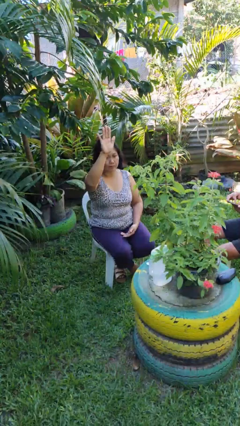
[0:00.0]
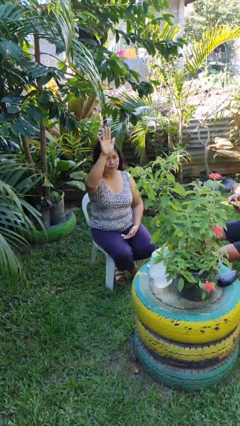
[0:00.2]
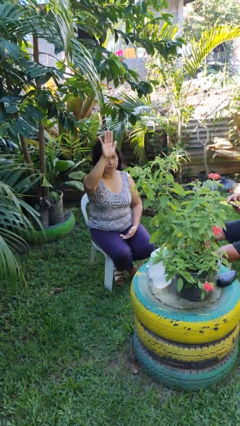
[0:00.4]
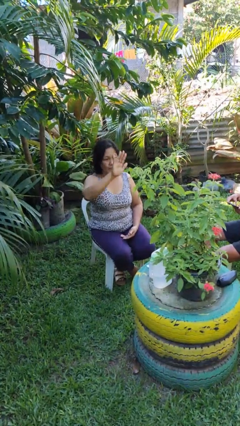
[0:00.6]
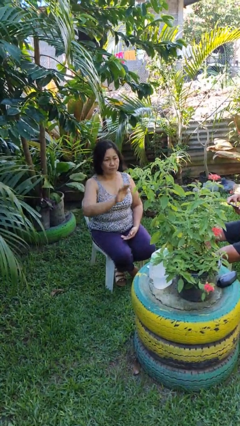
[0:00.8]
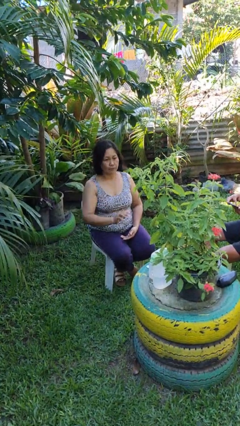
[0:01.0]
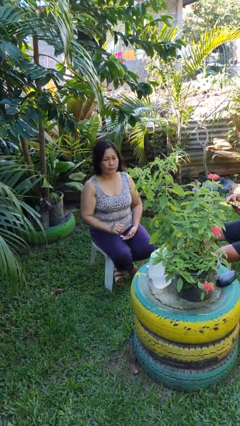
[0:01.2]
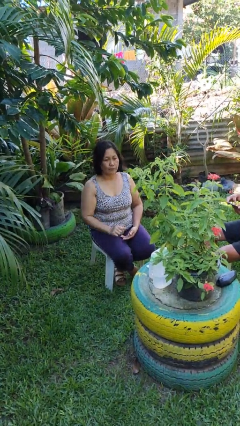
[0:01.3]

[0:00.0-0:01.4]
person gestures swipe down

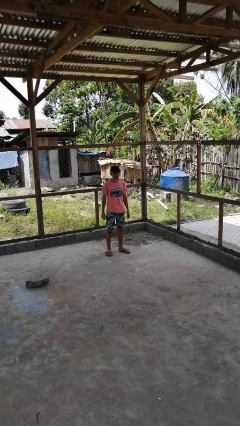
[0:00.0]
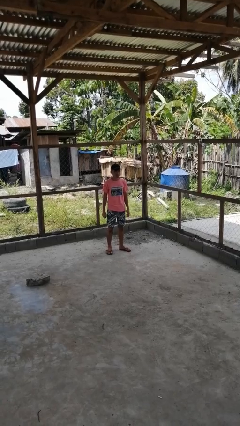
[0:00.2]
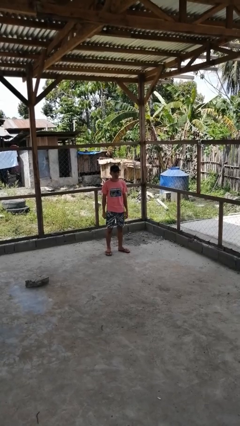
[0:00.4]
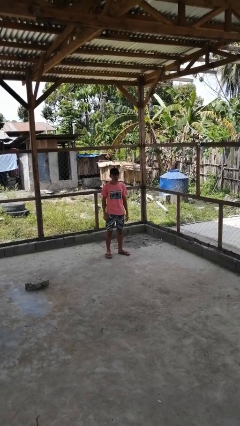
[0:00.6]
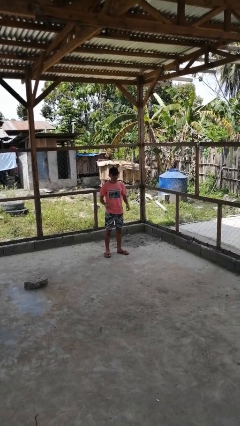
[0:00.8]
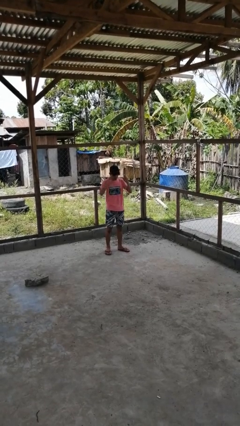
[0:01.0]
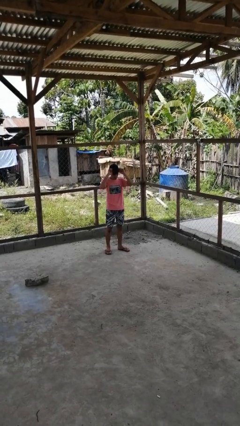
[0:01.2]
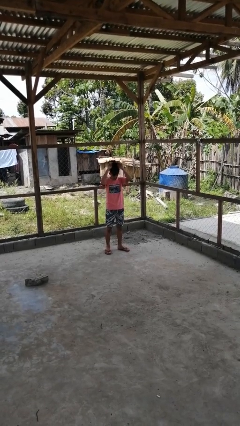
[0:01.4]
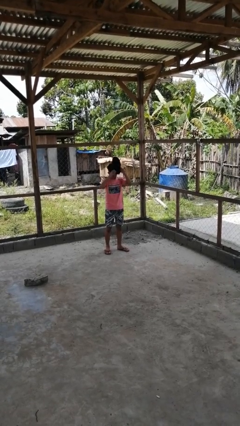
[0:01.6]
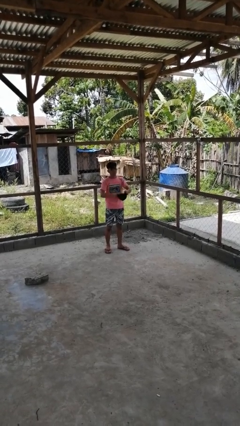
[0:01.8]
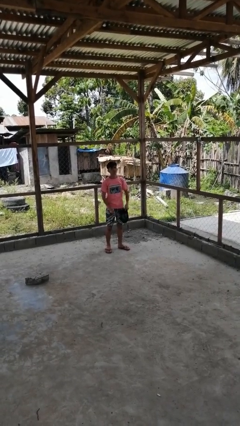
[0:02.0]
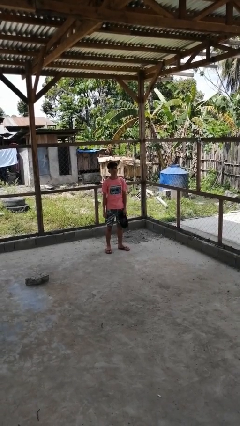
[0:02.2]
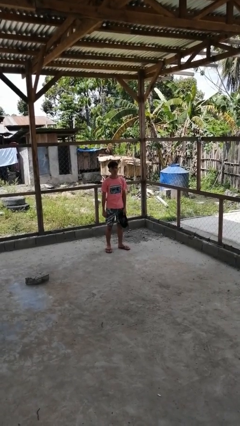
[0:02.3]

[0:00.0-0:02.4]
person takes off hat

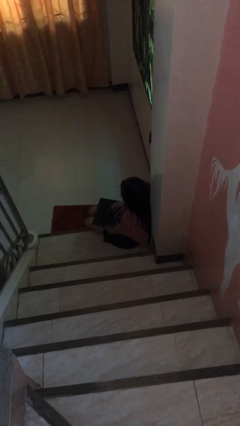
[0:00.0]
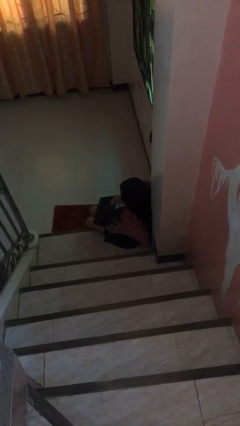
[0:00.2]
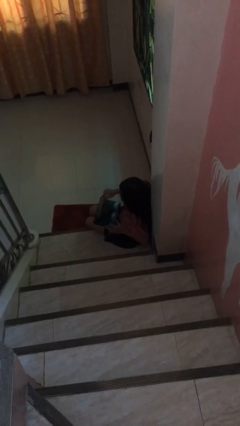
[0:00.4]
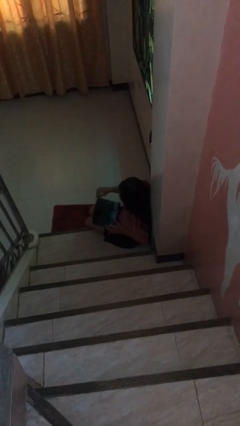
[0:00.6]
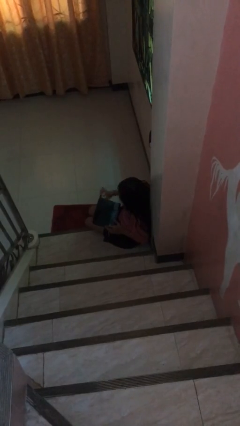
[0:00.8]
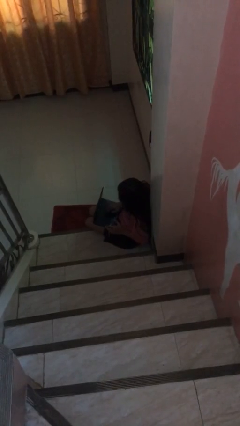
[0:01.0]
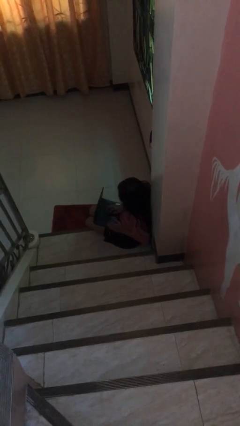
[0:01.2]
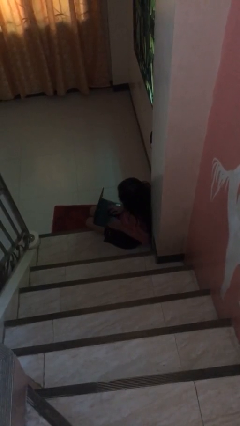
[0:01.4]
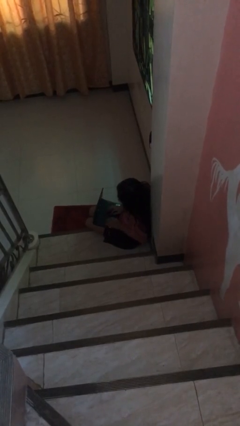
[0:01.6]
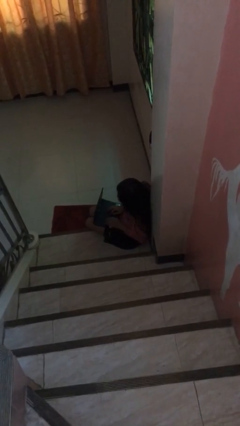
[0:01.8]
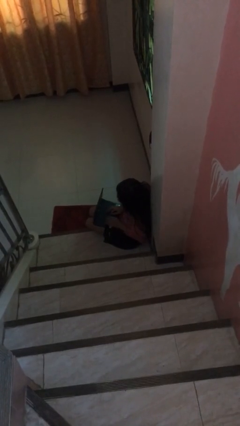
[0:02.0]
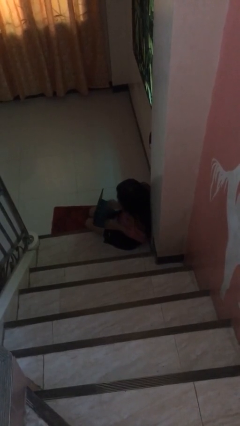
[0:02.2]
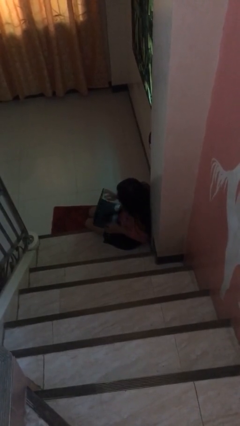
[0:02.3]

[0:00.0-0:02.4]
person interacts with laptop

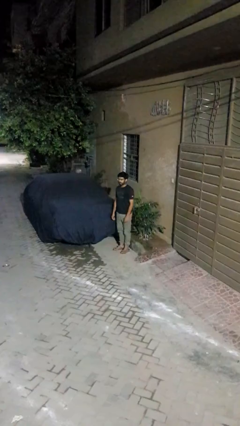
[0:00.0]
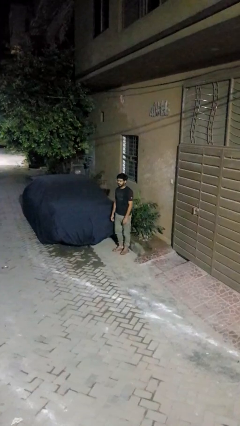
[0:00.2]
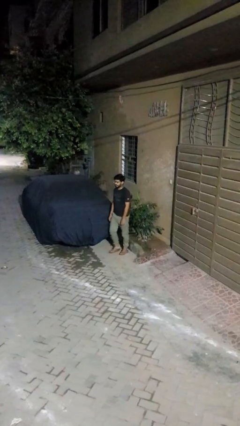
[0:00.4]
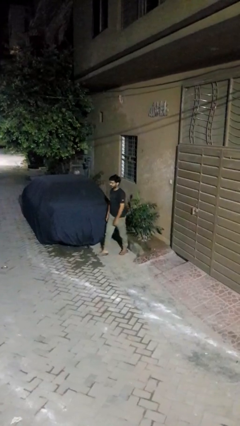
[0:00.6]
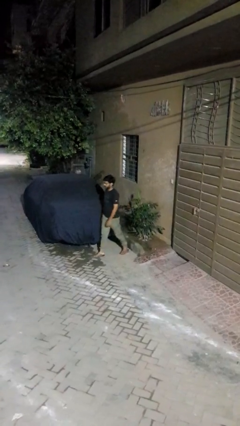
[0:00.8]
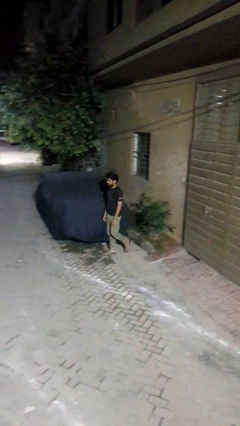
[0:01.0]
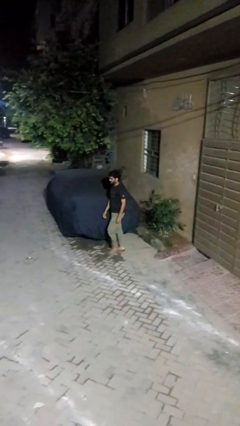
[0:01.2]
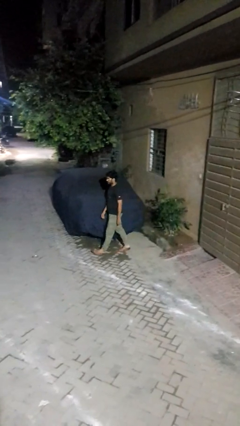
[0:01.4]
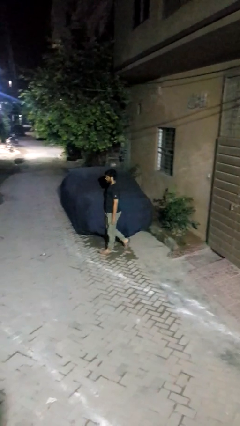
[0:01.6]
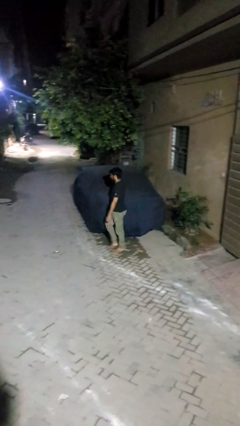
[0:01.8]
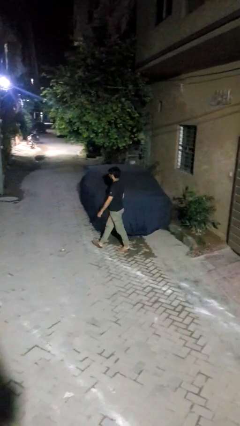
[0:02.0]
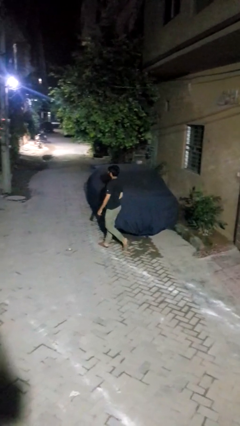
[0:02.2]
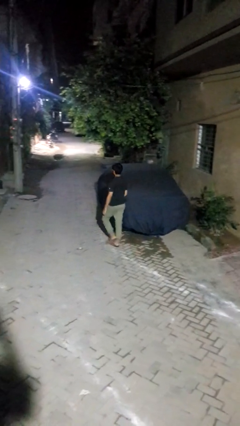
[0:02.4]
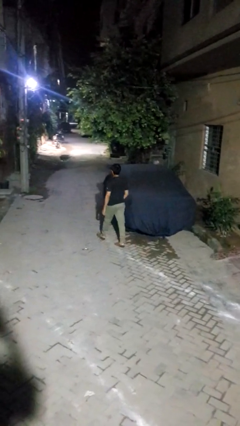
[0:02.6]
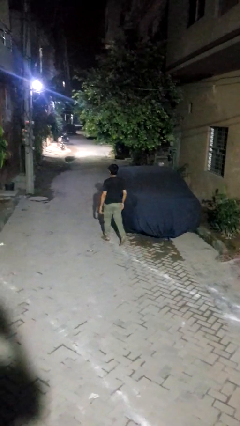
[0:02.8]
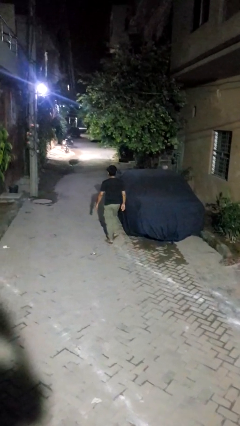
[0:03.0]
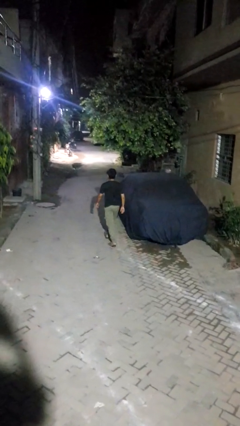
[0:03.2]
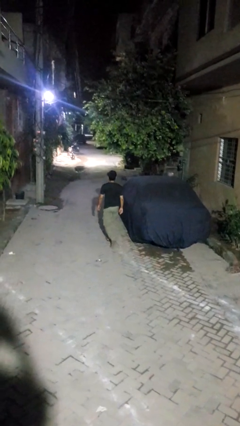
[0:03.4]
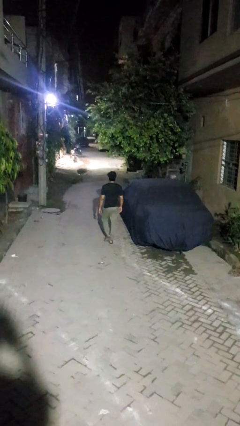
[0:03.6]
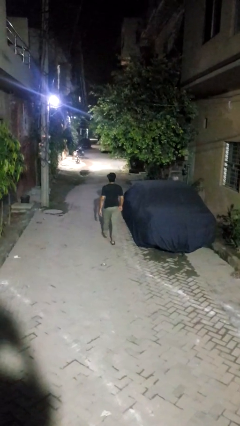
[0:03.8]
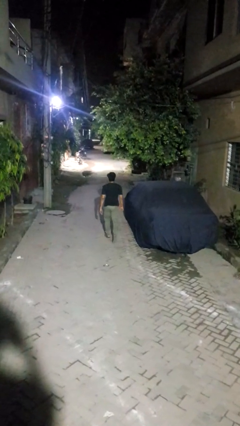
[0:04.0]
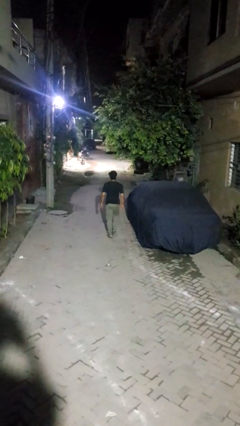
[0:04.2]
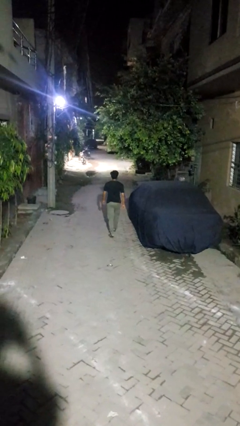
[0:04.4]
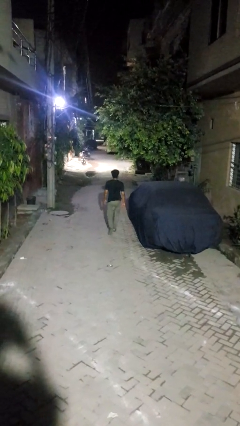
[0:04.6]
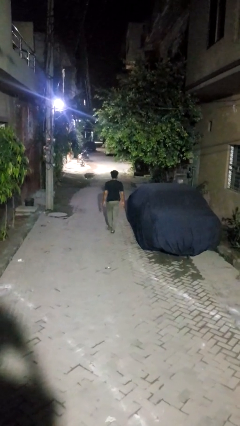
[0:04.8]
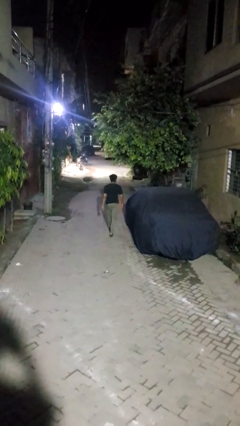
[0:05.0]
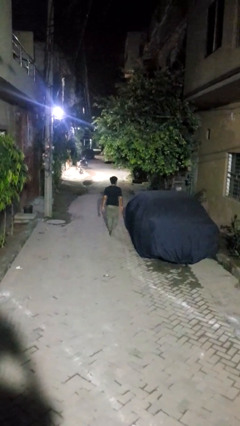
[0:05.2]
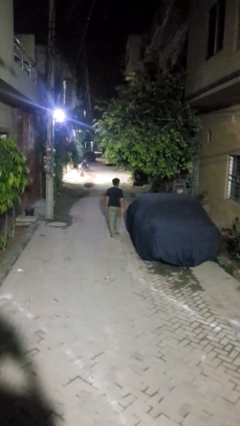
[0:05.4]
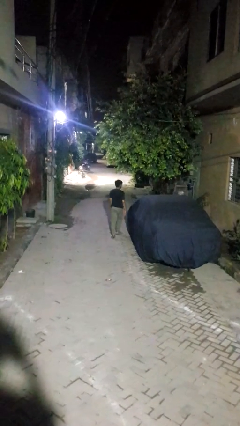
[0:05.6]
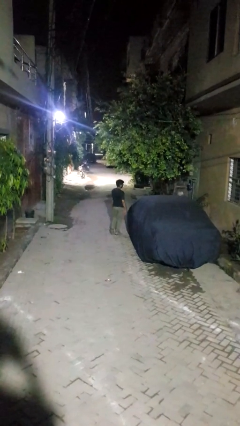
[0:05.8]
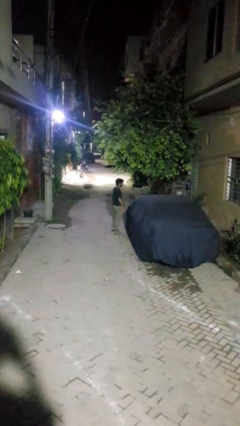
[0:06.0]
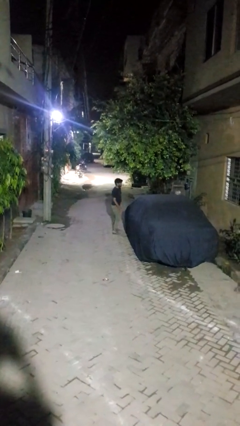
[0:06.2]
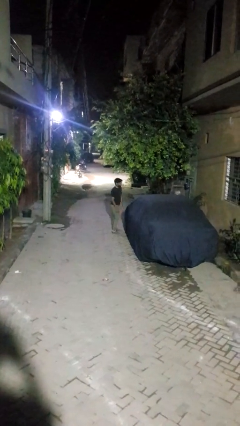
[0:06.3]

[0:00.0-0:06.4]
person walks around car

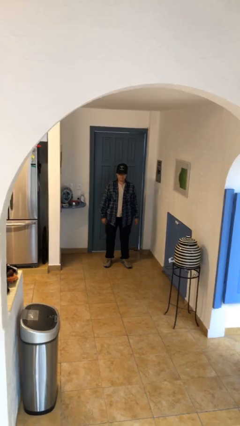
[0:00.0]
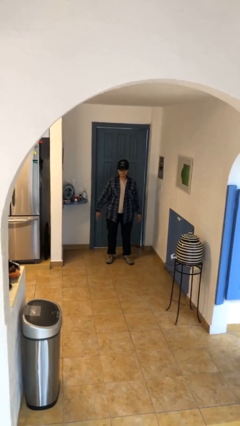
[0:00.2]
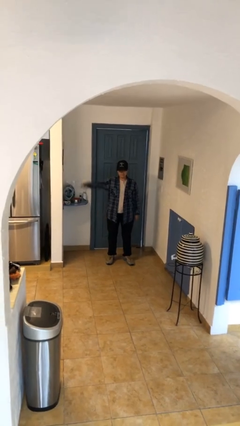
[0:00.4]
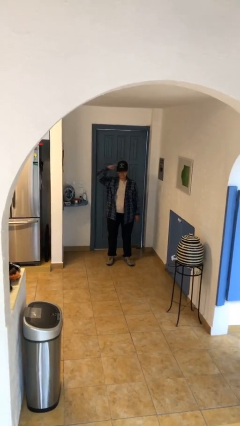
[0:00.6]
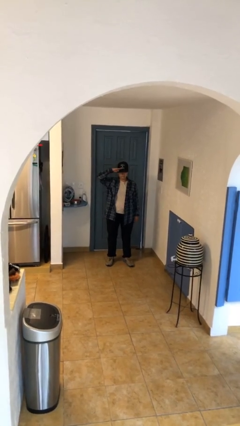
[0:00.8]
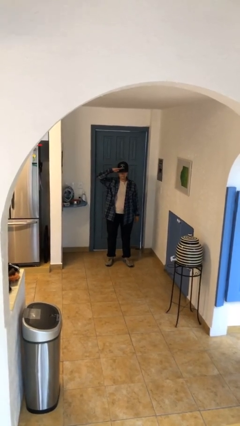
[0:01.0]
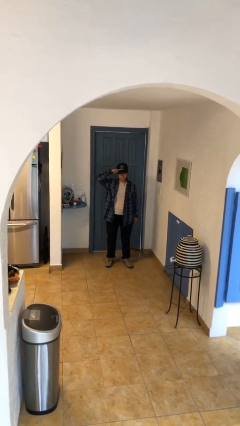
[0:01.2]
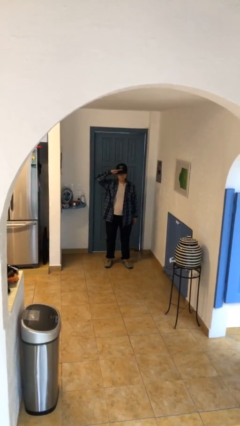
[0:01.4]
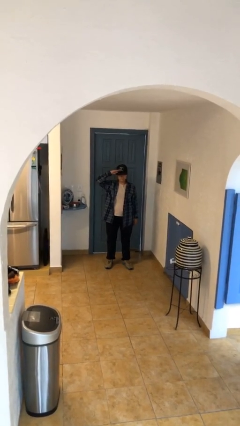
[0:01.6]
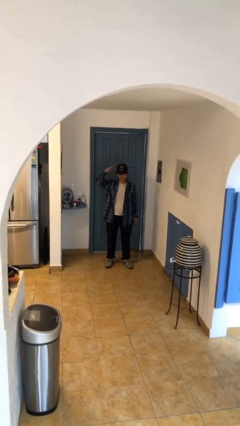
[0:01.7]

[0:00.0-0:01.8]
person salutes

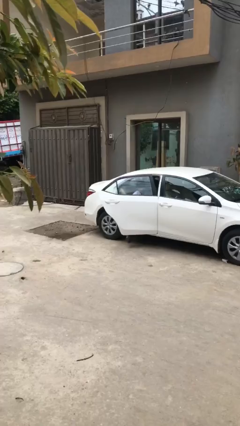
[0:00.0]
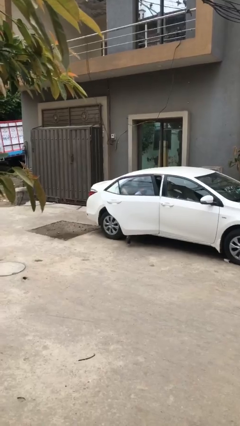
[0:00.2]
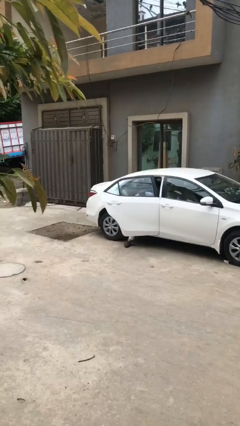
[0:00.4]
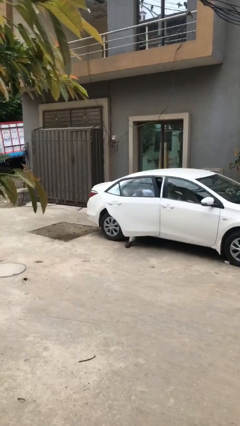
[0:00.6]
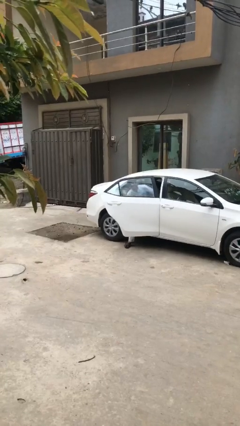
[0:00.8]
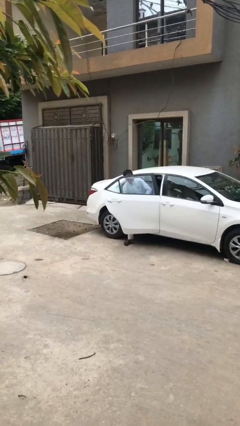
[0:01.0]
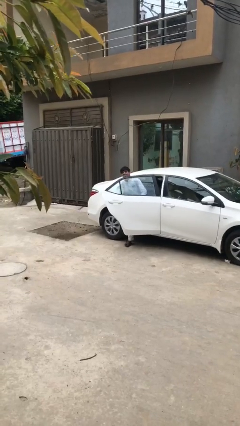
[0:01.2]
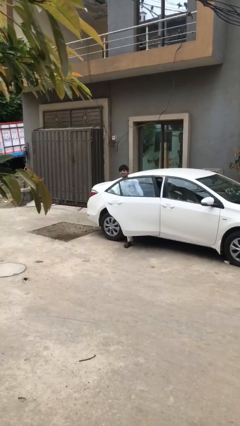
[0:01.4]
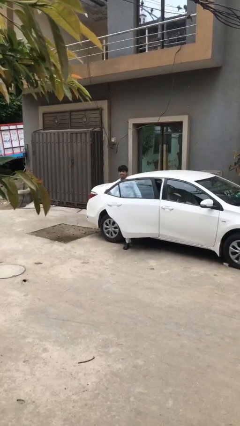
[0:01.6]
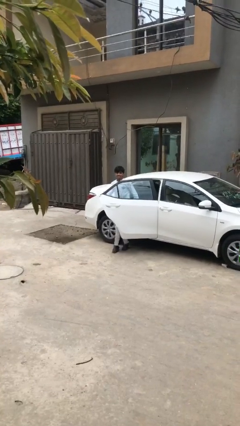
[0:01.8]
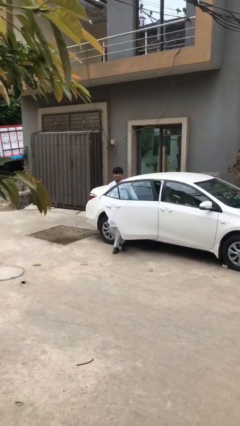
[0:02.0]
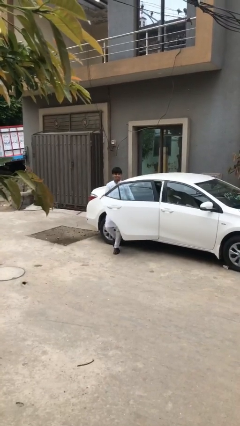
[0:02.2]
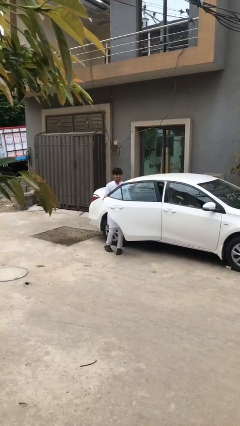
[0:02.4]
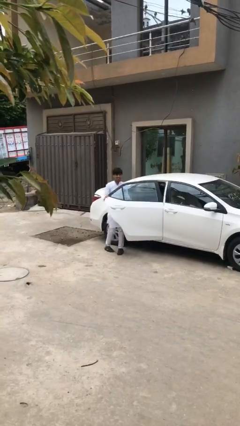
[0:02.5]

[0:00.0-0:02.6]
person exits car

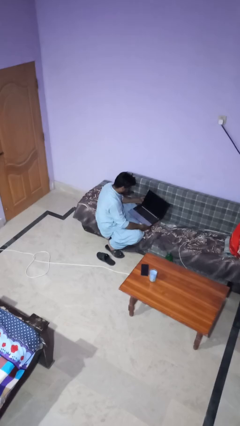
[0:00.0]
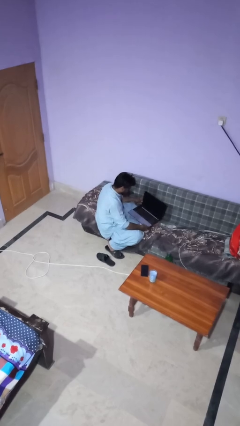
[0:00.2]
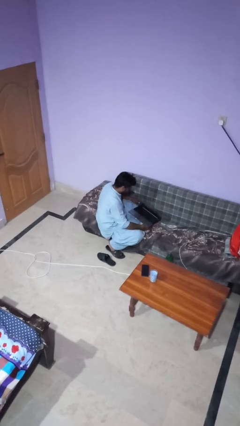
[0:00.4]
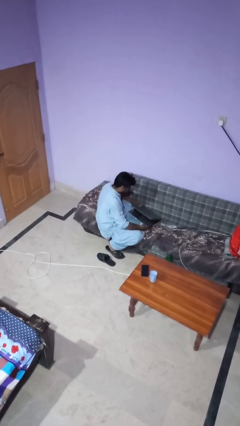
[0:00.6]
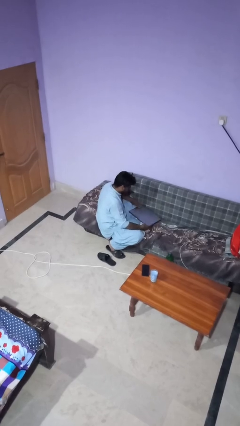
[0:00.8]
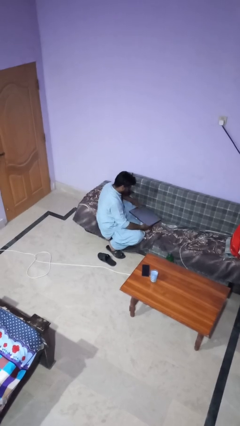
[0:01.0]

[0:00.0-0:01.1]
person closes laptop
